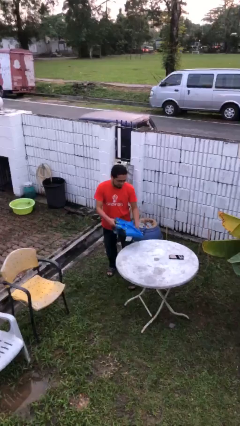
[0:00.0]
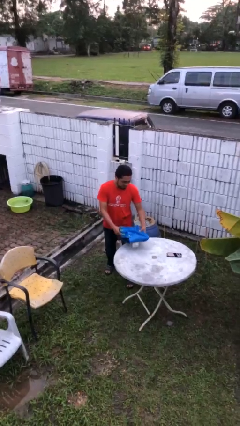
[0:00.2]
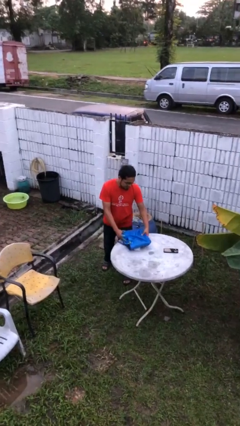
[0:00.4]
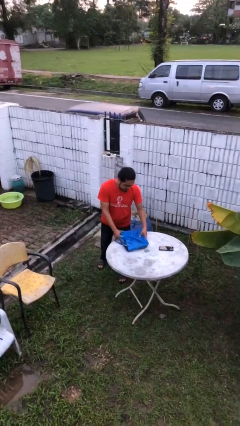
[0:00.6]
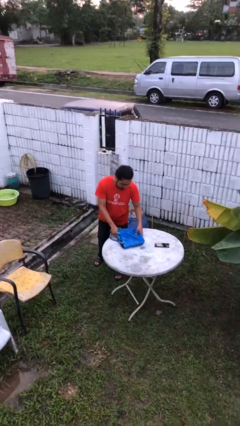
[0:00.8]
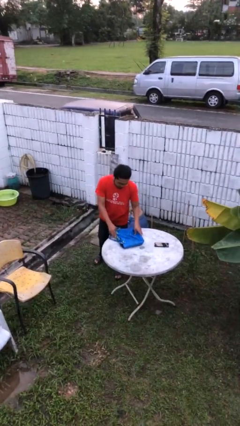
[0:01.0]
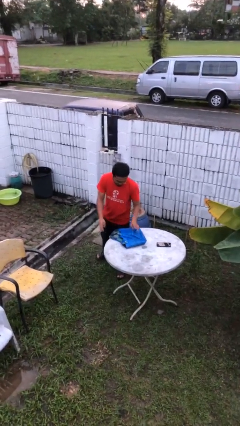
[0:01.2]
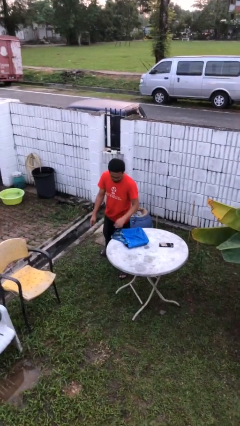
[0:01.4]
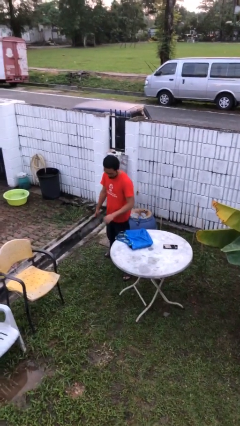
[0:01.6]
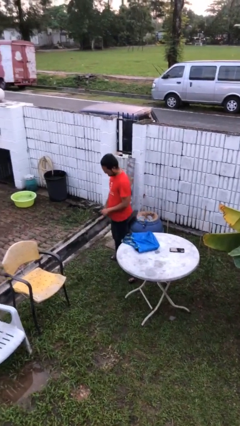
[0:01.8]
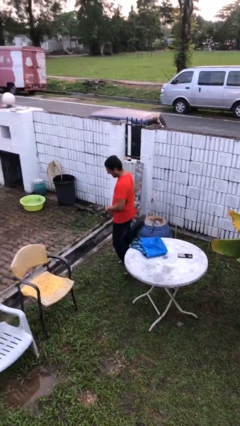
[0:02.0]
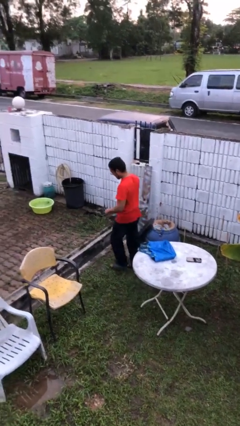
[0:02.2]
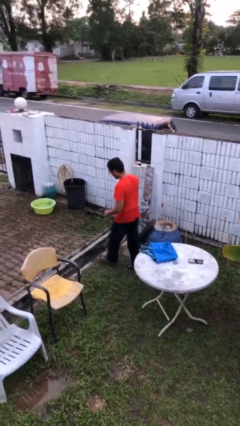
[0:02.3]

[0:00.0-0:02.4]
person puts down object on table

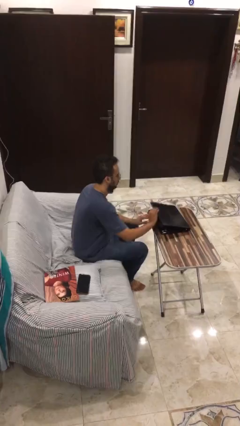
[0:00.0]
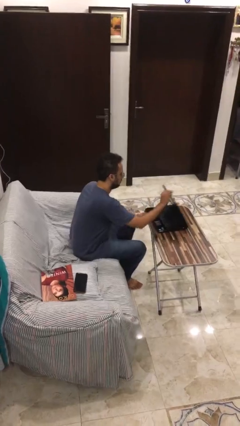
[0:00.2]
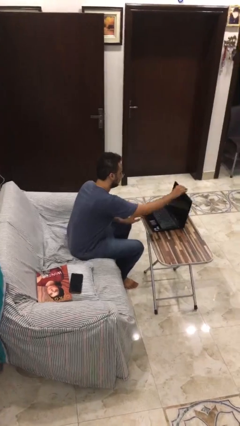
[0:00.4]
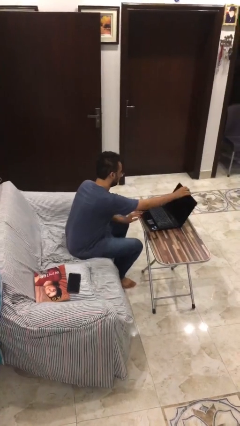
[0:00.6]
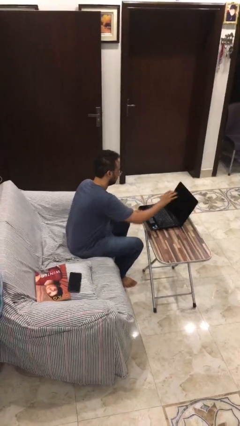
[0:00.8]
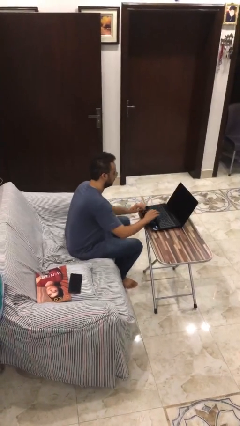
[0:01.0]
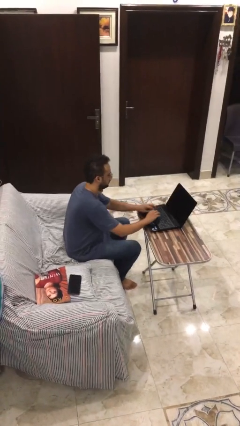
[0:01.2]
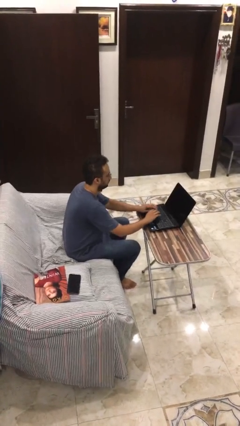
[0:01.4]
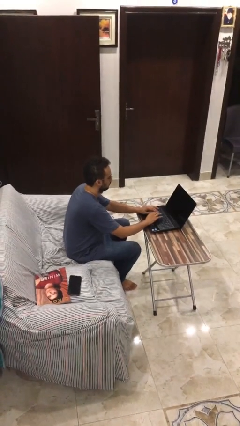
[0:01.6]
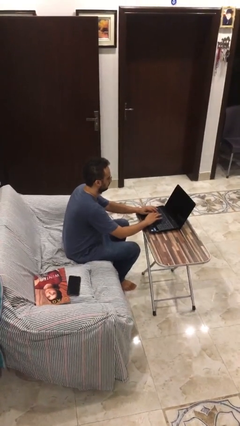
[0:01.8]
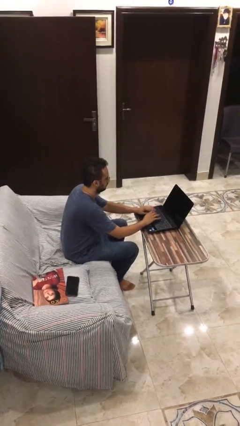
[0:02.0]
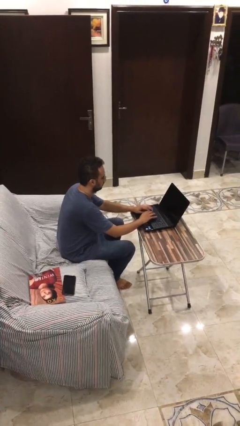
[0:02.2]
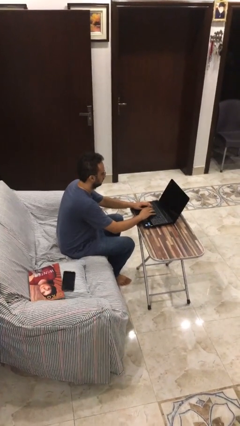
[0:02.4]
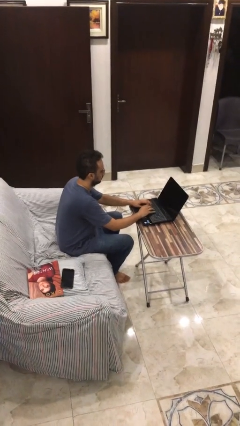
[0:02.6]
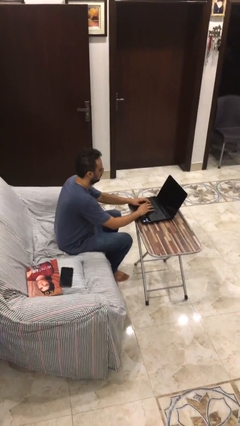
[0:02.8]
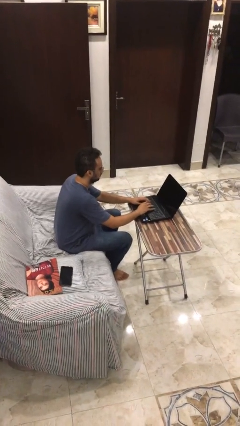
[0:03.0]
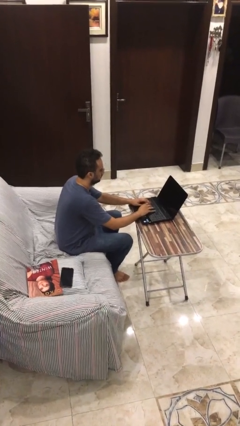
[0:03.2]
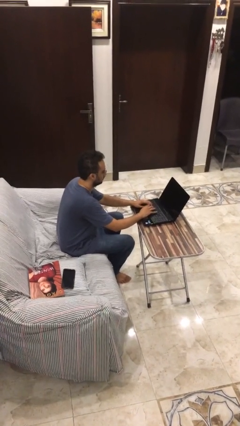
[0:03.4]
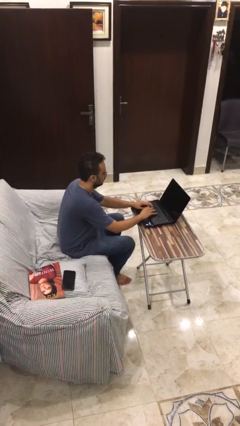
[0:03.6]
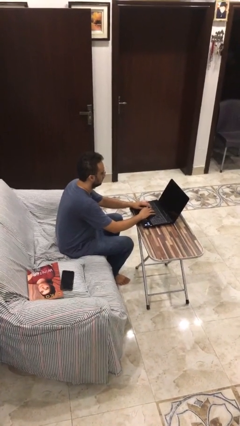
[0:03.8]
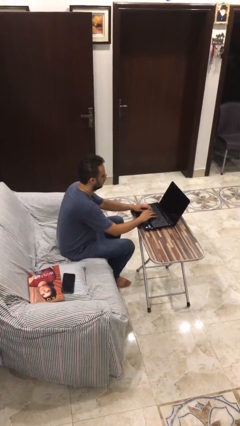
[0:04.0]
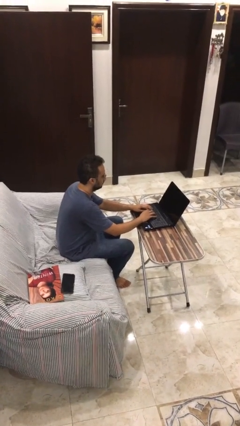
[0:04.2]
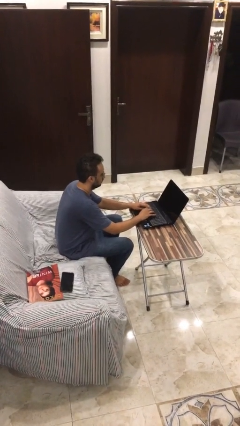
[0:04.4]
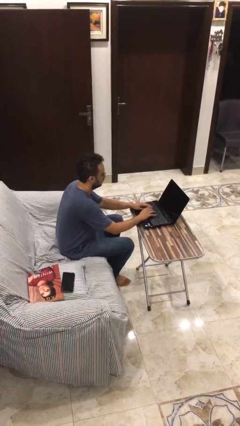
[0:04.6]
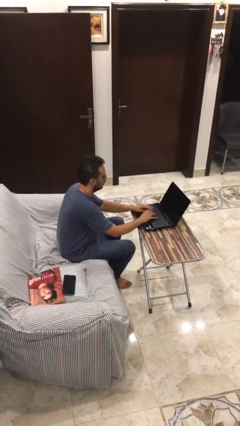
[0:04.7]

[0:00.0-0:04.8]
person interacts with laptop

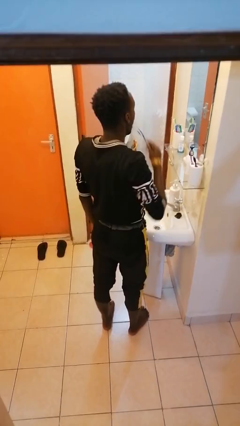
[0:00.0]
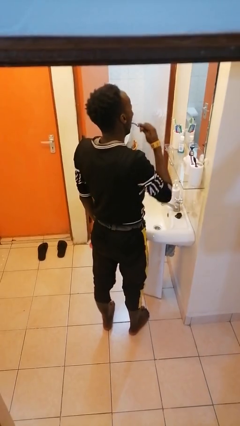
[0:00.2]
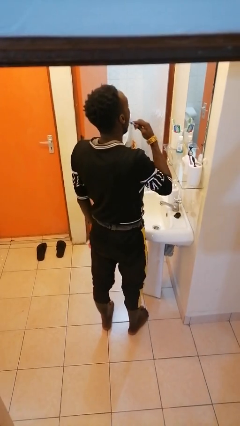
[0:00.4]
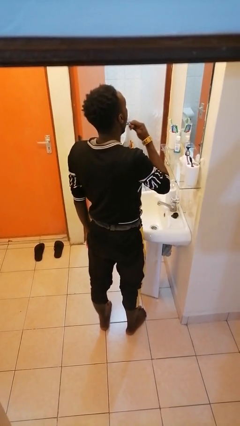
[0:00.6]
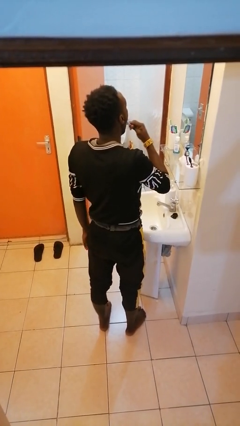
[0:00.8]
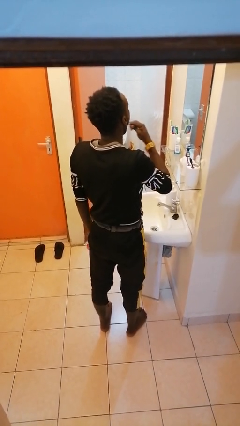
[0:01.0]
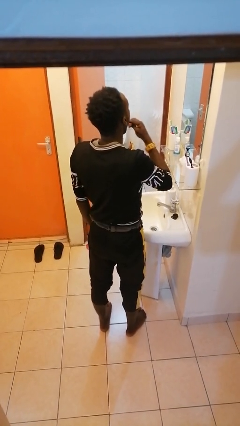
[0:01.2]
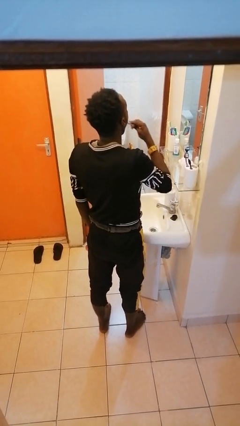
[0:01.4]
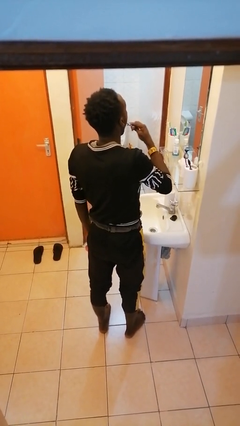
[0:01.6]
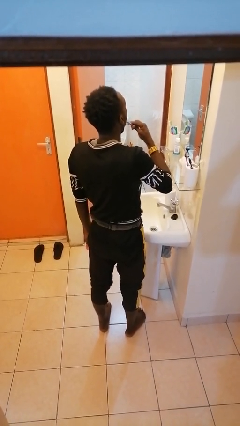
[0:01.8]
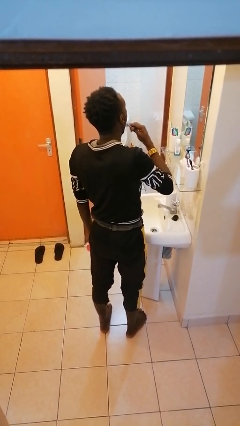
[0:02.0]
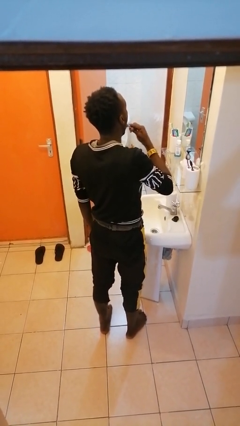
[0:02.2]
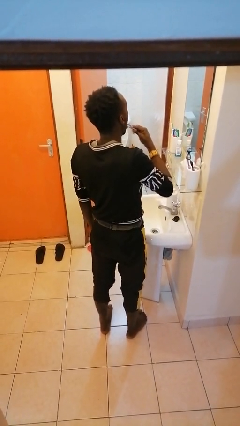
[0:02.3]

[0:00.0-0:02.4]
person brushes teeth

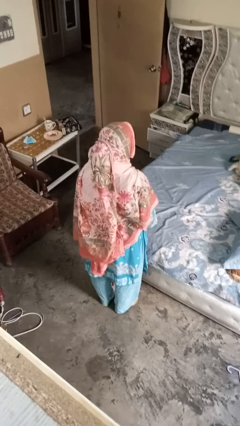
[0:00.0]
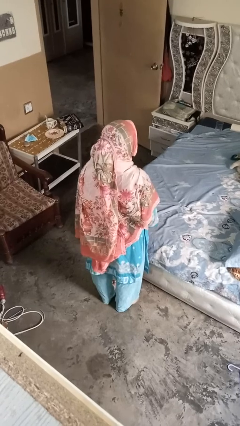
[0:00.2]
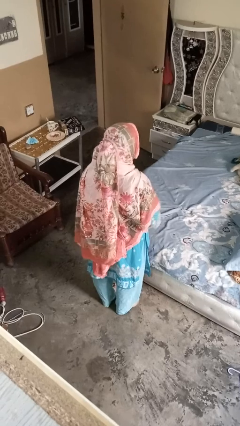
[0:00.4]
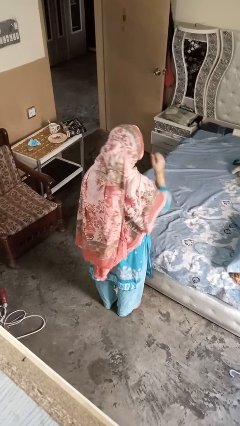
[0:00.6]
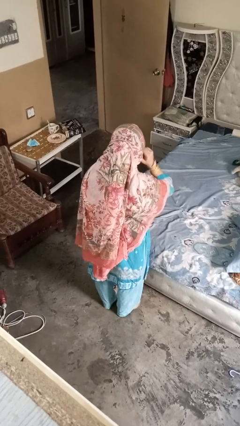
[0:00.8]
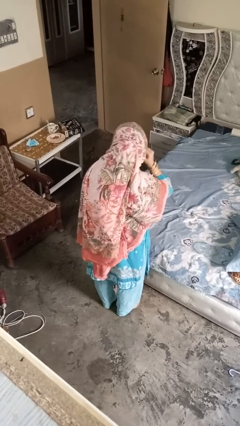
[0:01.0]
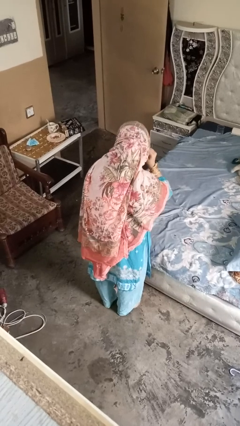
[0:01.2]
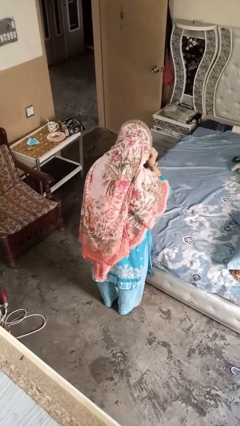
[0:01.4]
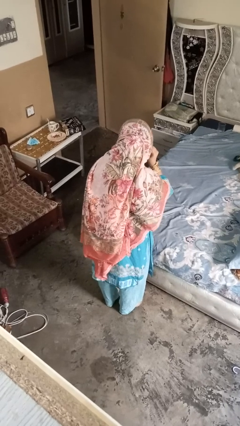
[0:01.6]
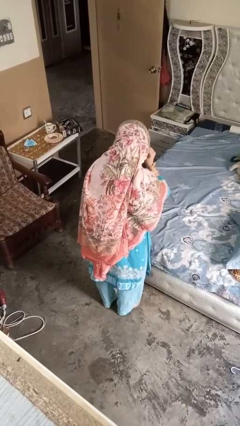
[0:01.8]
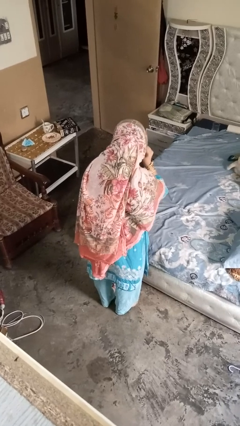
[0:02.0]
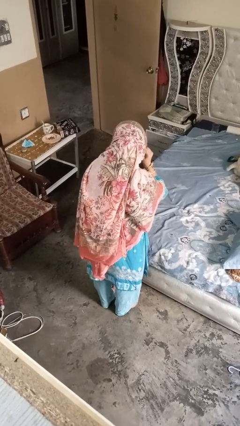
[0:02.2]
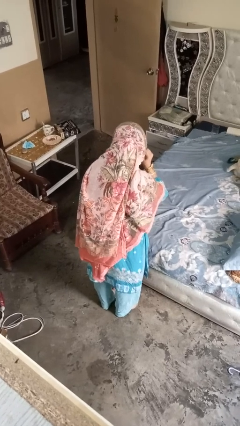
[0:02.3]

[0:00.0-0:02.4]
person gestures listen closely

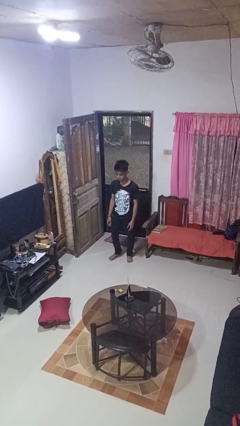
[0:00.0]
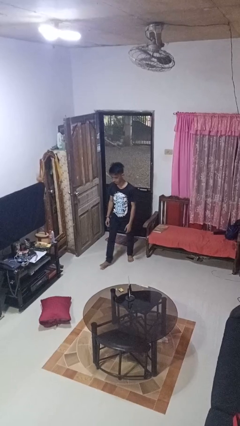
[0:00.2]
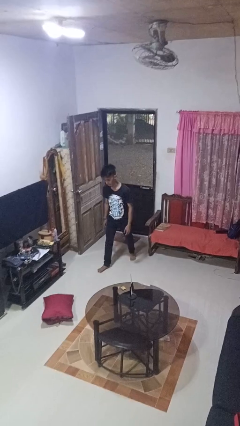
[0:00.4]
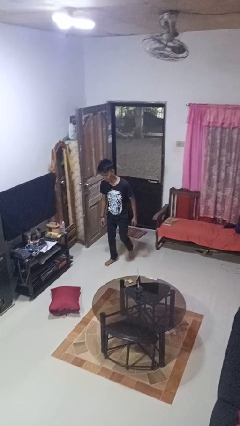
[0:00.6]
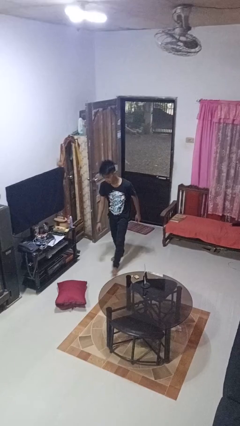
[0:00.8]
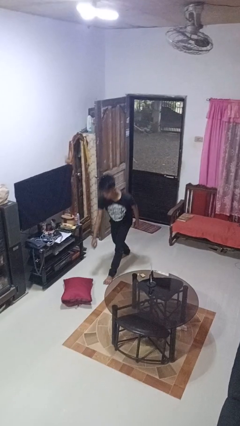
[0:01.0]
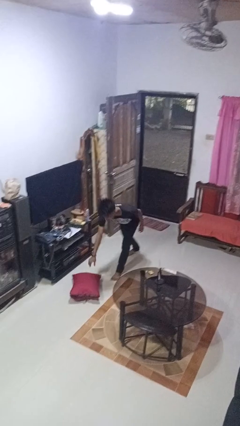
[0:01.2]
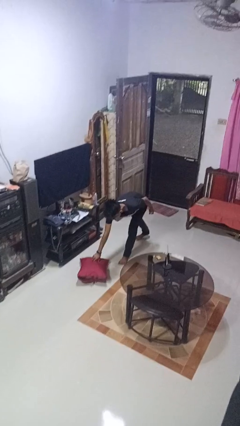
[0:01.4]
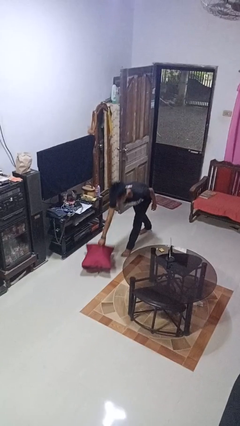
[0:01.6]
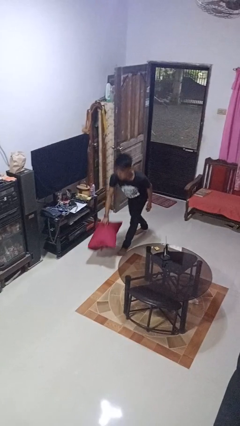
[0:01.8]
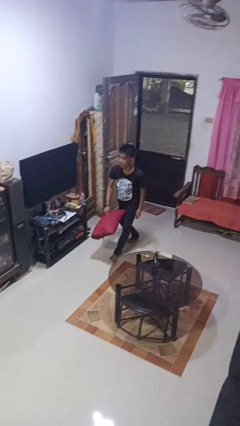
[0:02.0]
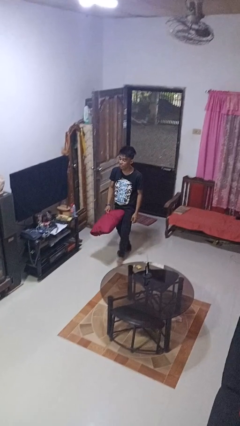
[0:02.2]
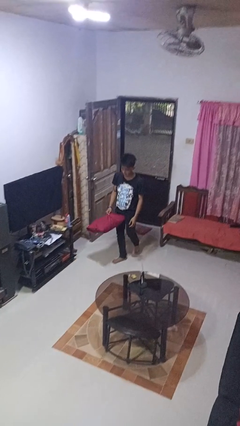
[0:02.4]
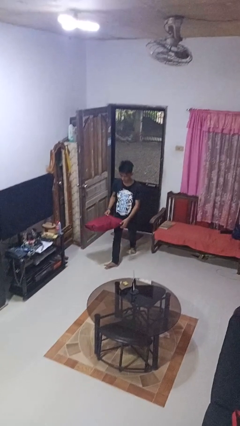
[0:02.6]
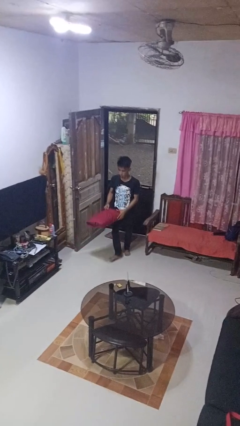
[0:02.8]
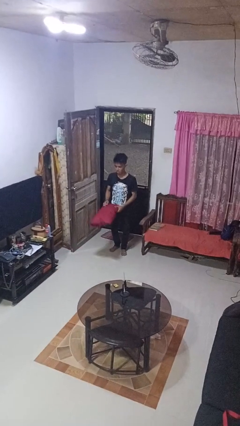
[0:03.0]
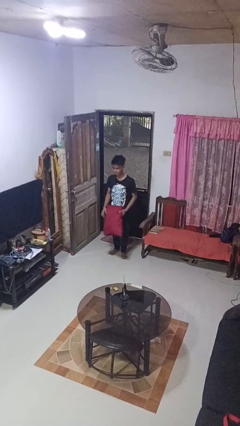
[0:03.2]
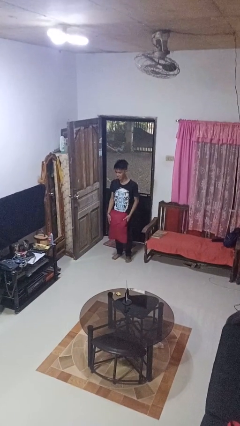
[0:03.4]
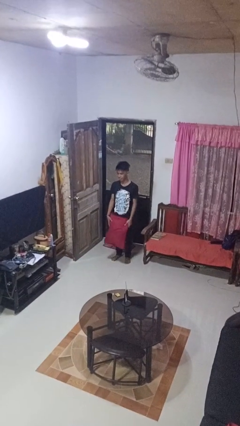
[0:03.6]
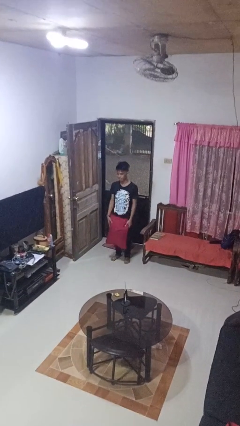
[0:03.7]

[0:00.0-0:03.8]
person picks up object from floor

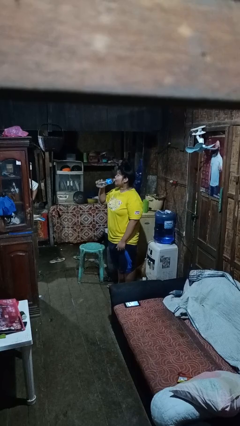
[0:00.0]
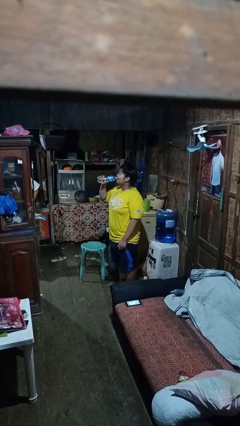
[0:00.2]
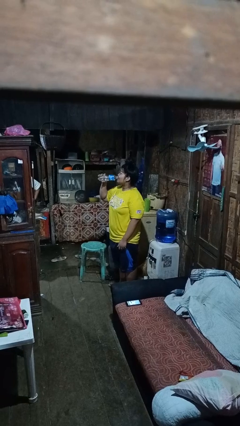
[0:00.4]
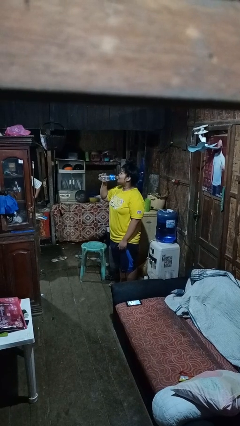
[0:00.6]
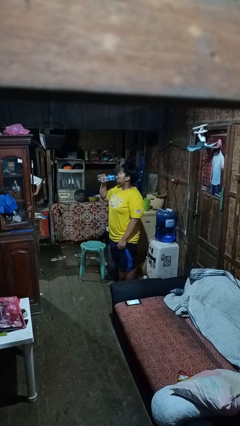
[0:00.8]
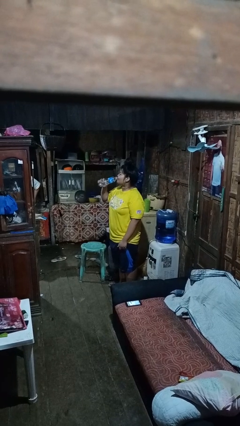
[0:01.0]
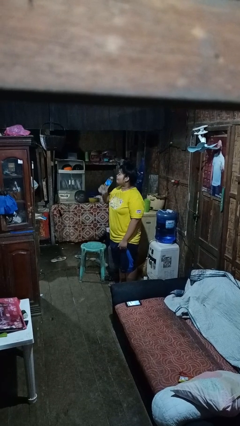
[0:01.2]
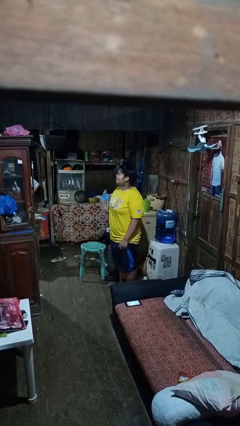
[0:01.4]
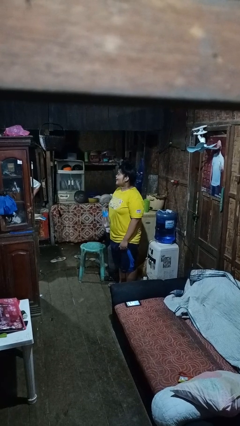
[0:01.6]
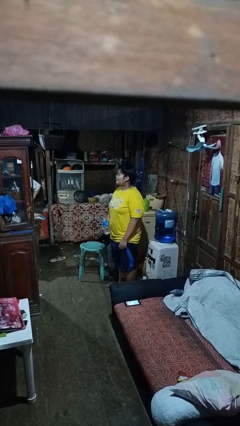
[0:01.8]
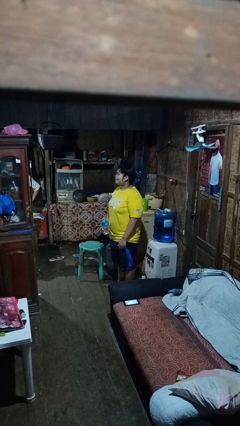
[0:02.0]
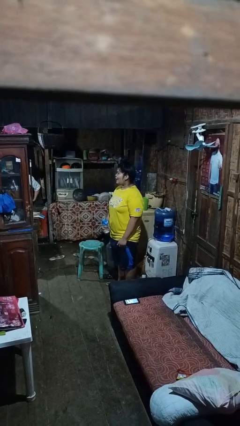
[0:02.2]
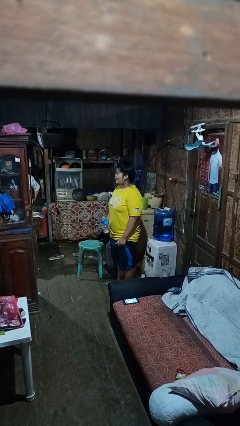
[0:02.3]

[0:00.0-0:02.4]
person drinks from bottle
